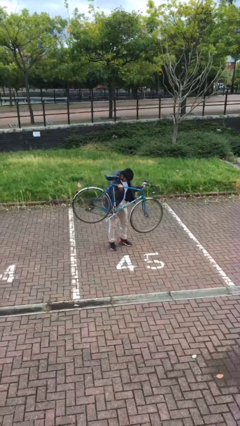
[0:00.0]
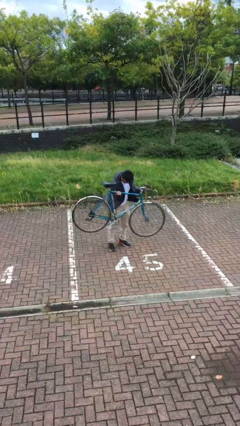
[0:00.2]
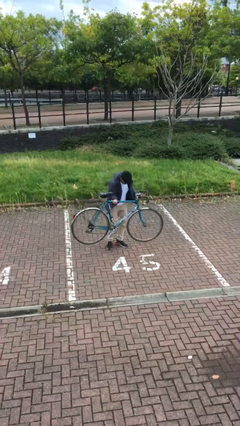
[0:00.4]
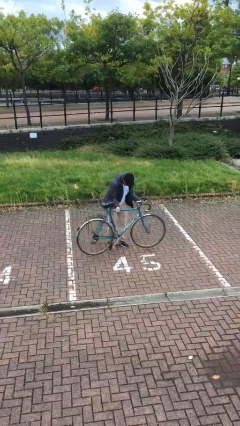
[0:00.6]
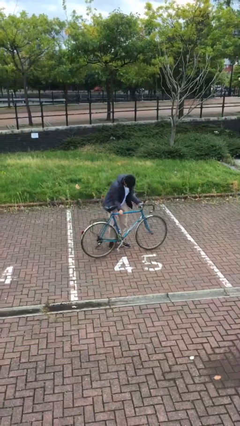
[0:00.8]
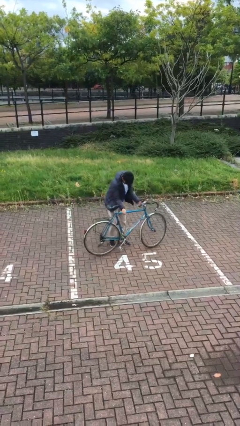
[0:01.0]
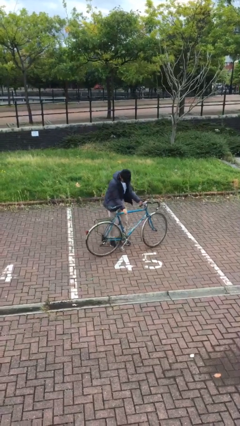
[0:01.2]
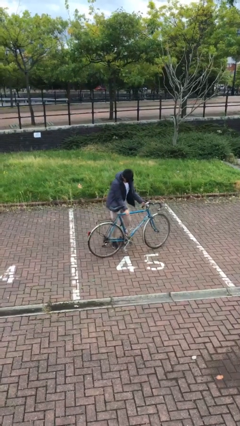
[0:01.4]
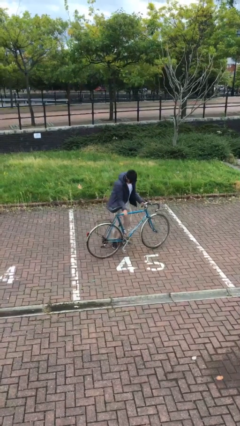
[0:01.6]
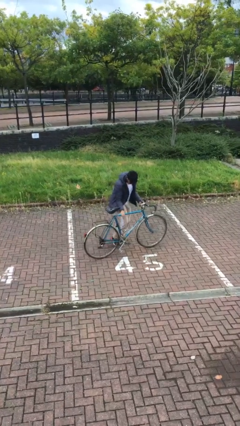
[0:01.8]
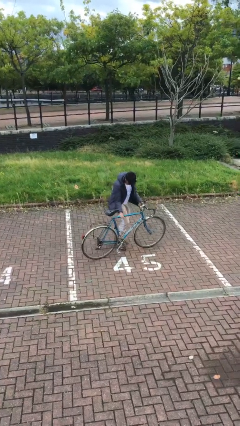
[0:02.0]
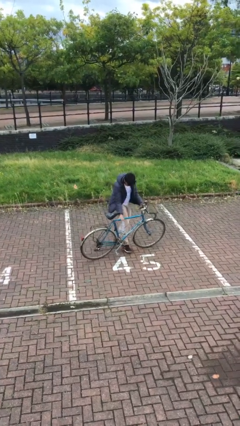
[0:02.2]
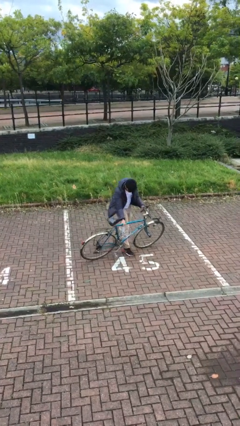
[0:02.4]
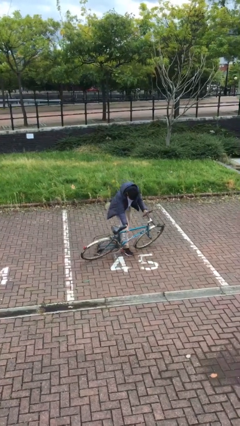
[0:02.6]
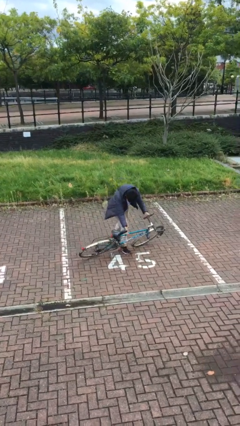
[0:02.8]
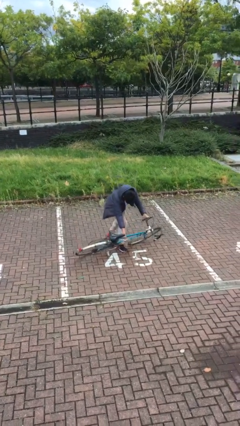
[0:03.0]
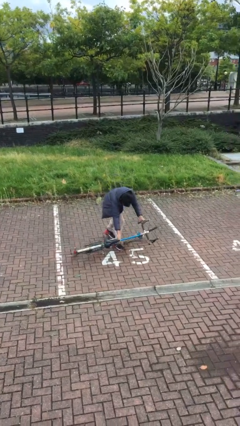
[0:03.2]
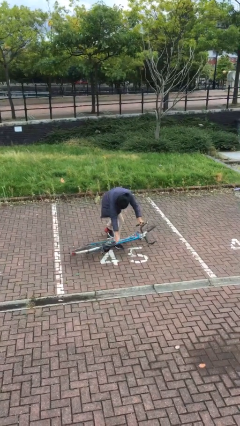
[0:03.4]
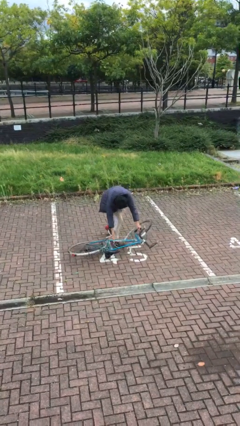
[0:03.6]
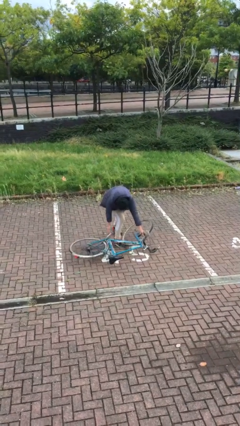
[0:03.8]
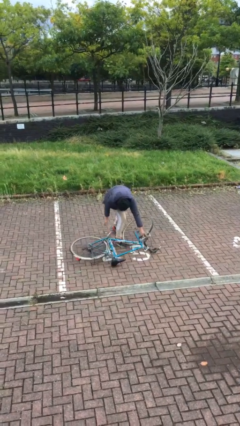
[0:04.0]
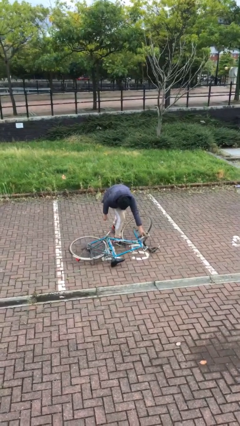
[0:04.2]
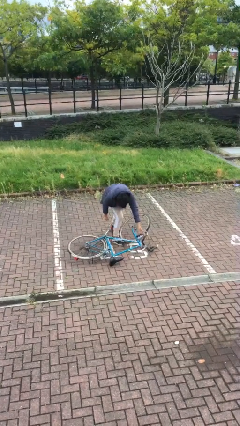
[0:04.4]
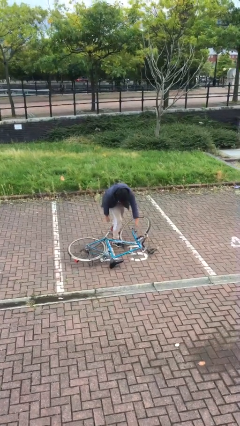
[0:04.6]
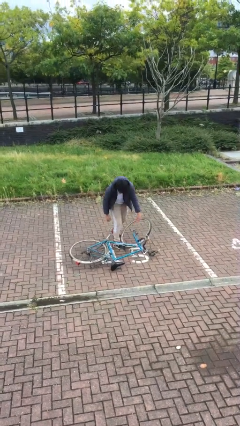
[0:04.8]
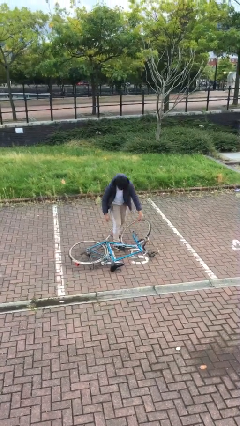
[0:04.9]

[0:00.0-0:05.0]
person puts down object on floor

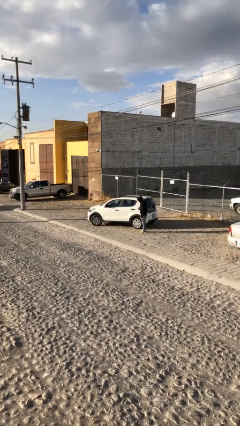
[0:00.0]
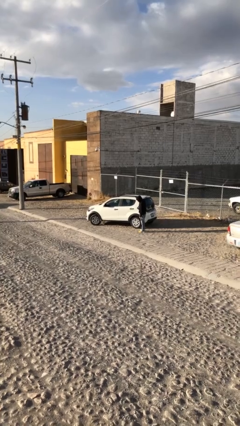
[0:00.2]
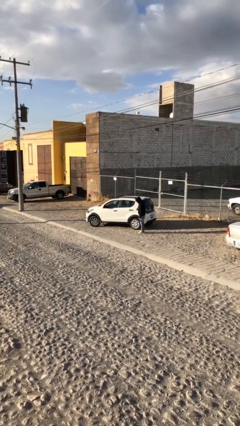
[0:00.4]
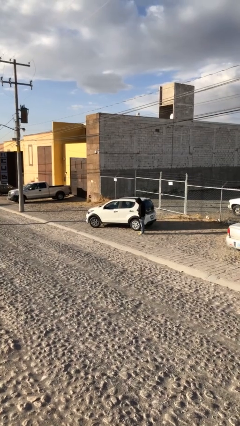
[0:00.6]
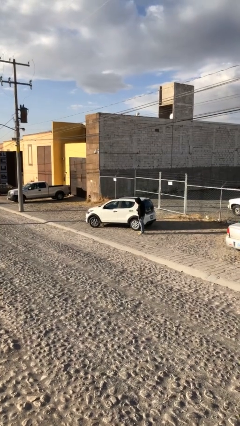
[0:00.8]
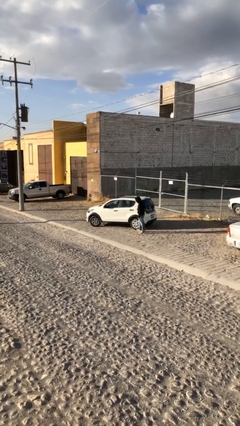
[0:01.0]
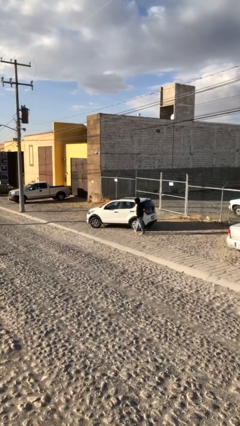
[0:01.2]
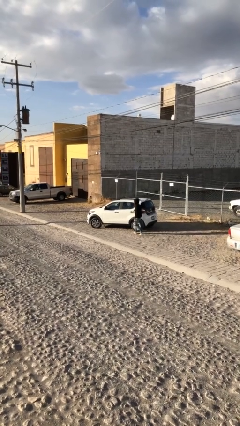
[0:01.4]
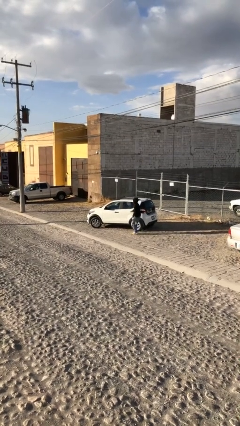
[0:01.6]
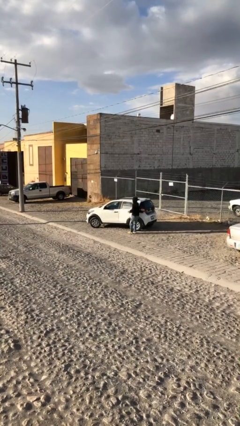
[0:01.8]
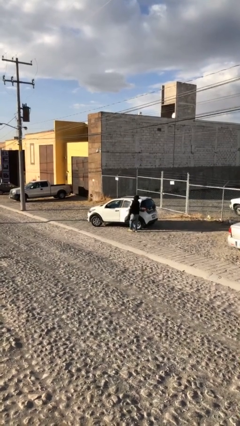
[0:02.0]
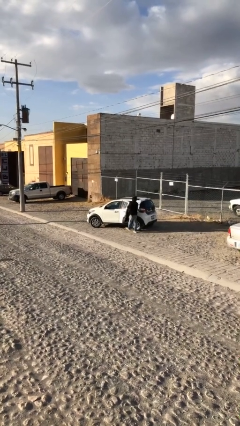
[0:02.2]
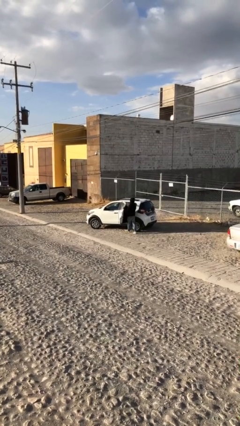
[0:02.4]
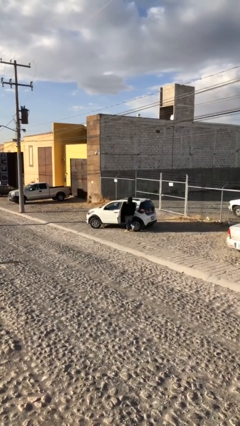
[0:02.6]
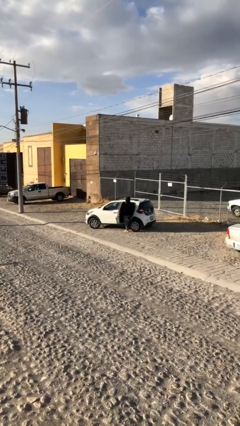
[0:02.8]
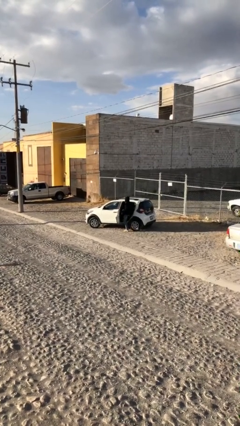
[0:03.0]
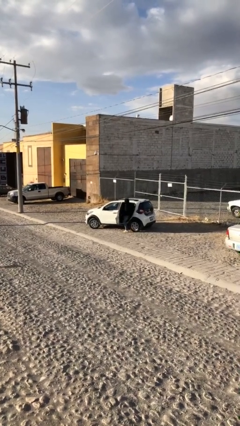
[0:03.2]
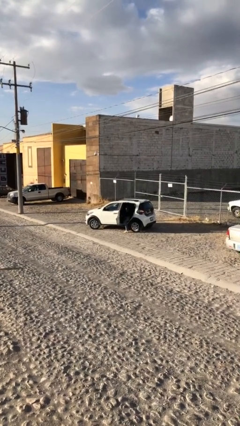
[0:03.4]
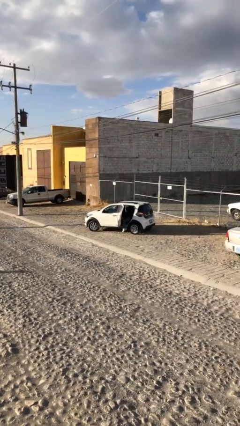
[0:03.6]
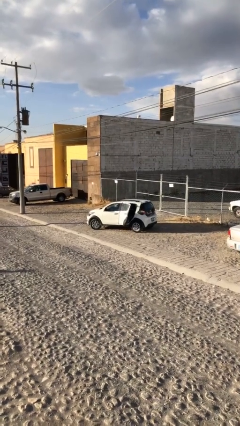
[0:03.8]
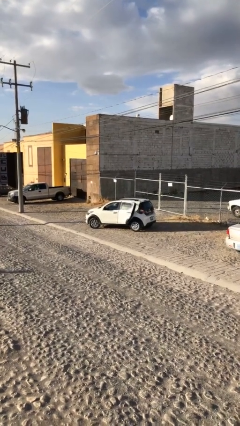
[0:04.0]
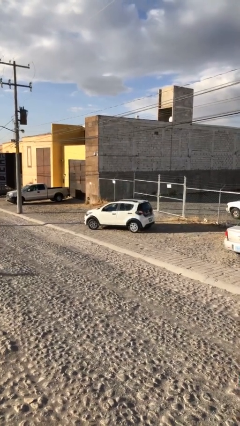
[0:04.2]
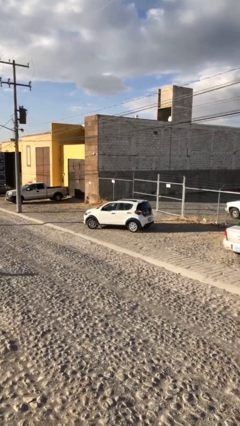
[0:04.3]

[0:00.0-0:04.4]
car picks up person

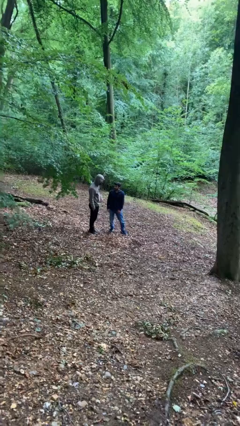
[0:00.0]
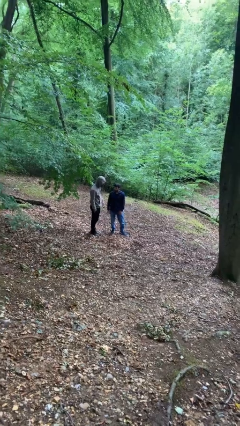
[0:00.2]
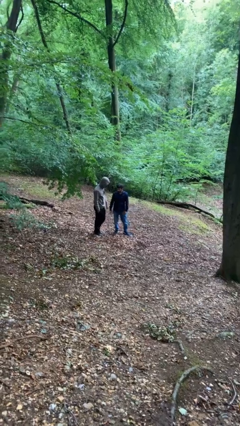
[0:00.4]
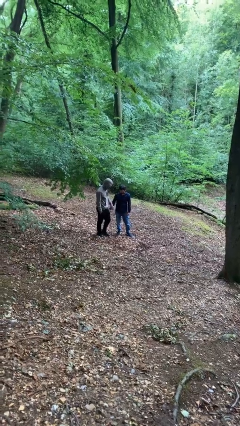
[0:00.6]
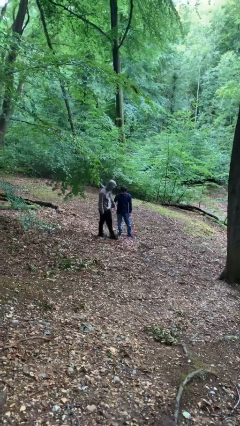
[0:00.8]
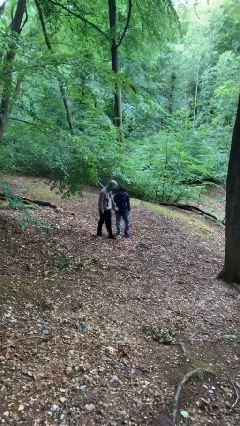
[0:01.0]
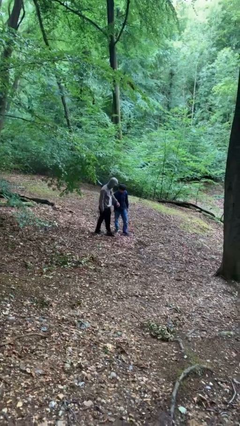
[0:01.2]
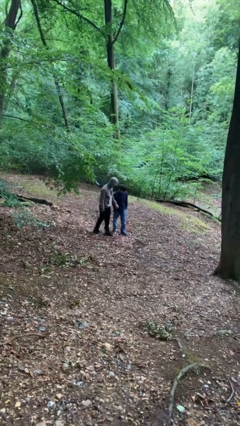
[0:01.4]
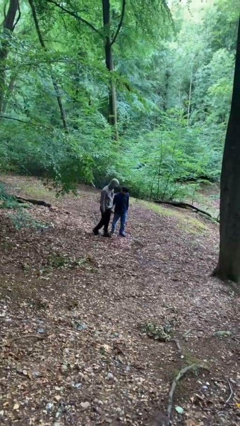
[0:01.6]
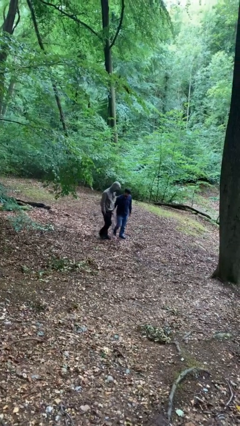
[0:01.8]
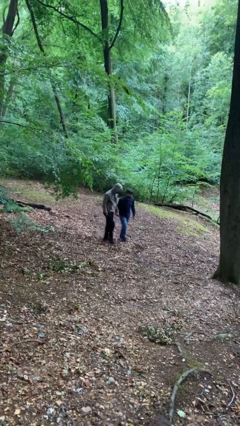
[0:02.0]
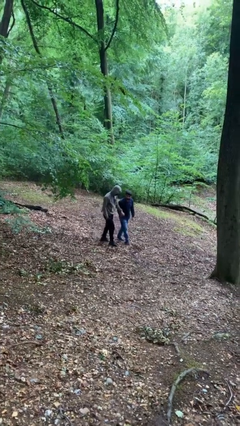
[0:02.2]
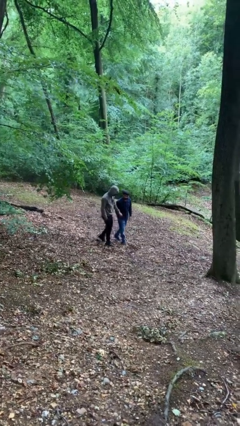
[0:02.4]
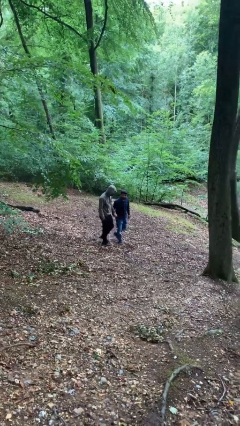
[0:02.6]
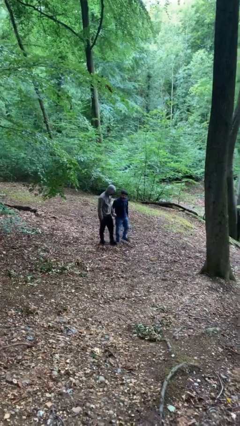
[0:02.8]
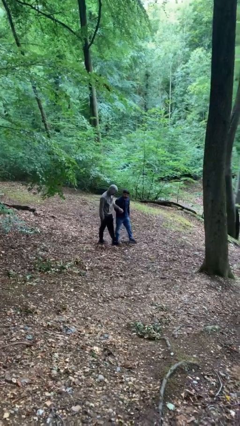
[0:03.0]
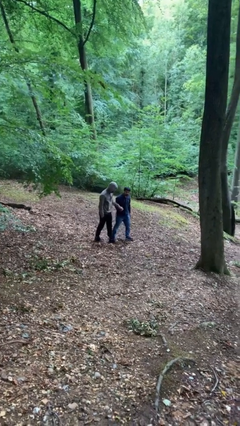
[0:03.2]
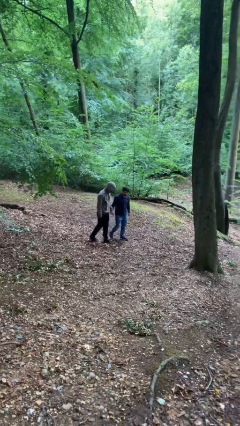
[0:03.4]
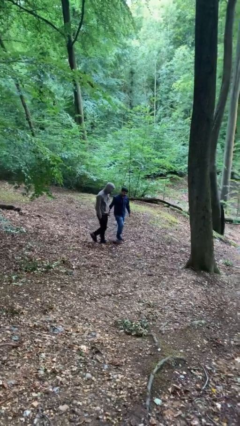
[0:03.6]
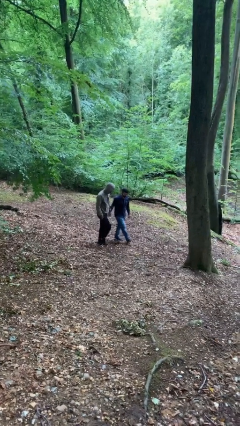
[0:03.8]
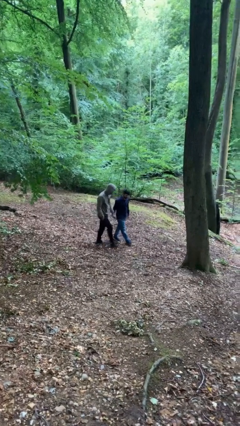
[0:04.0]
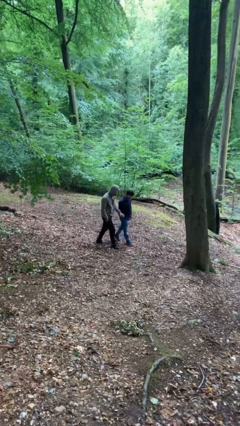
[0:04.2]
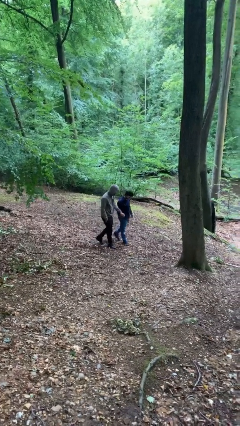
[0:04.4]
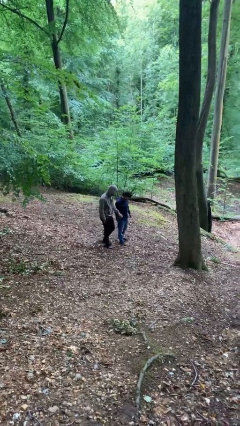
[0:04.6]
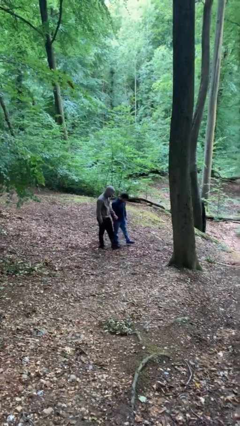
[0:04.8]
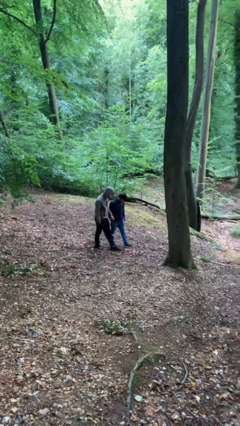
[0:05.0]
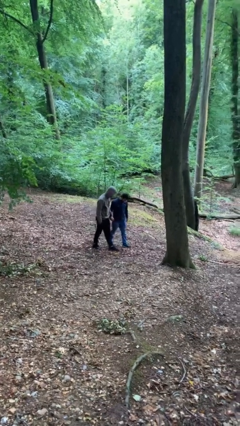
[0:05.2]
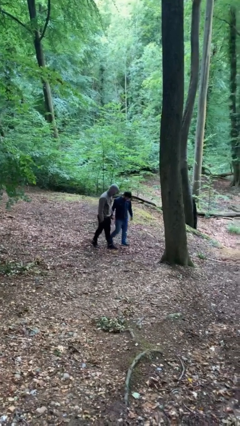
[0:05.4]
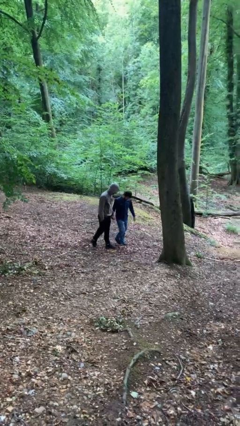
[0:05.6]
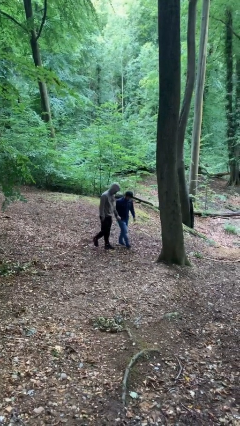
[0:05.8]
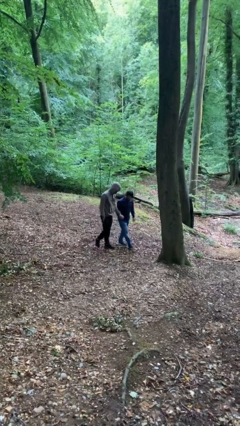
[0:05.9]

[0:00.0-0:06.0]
person holds hand

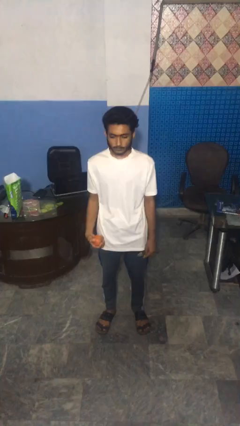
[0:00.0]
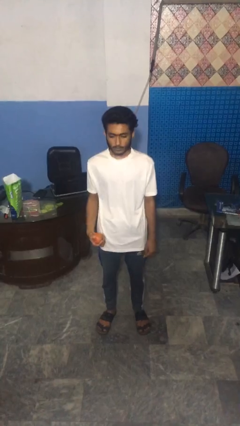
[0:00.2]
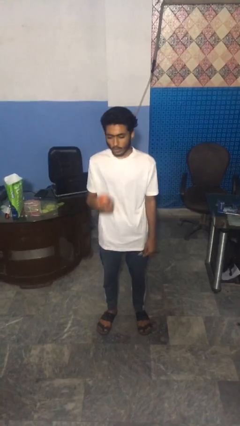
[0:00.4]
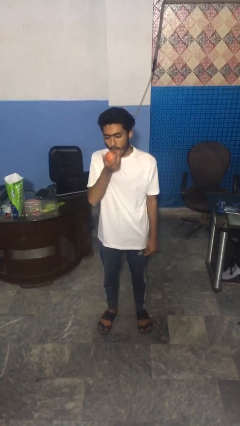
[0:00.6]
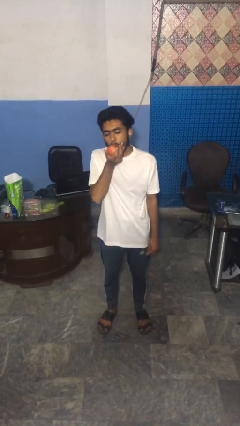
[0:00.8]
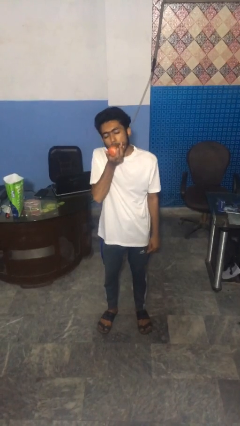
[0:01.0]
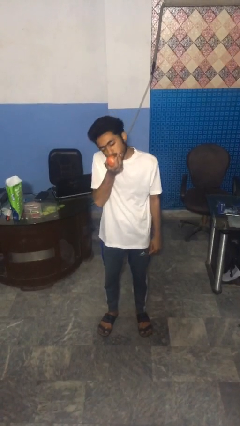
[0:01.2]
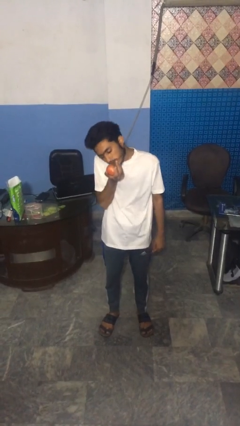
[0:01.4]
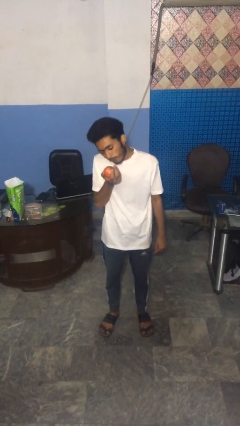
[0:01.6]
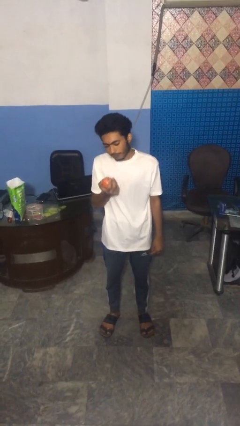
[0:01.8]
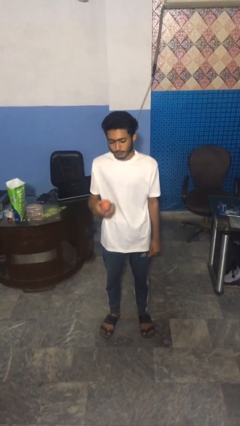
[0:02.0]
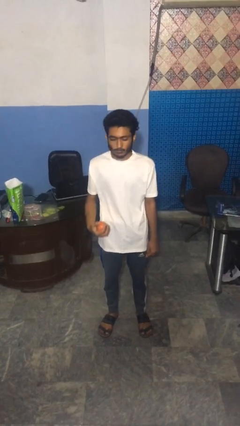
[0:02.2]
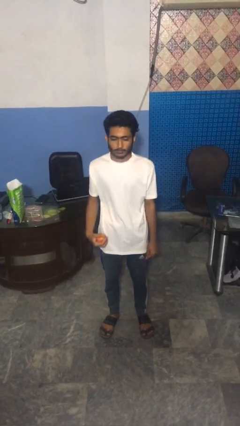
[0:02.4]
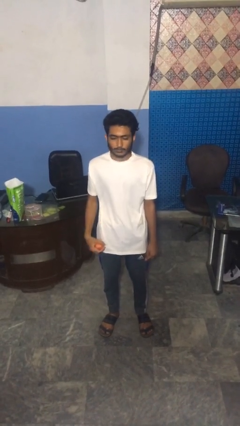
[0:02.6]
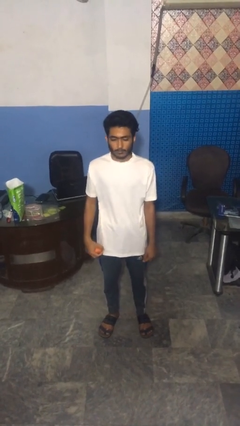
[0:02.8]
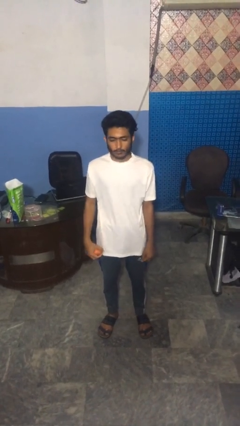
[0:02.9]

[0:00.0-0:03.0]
person eats apple
